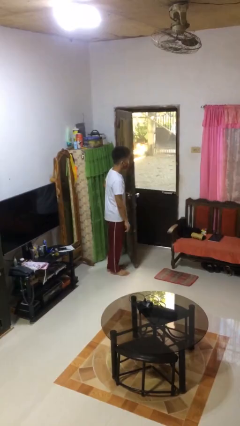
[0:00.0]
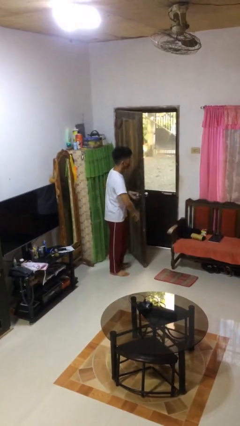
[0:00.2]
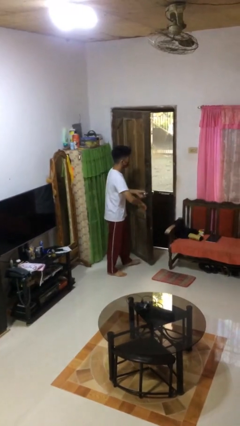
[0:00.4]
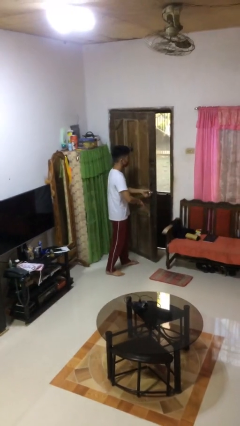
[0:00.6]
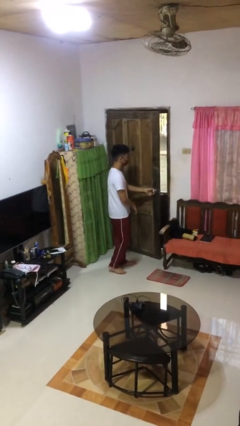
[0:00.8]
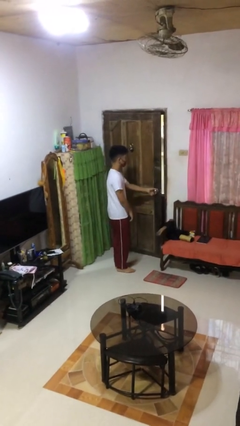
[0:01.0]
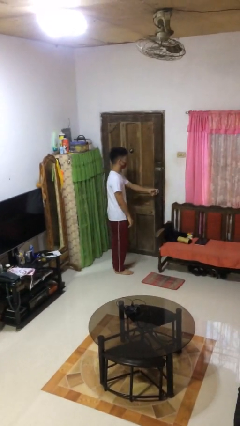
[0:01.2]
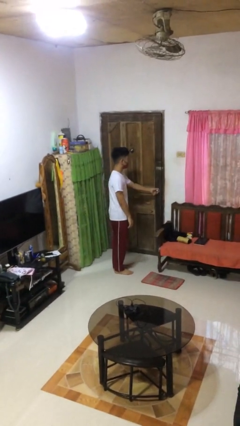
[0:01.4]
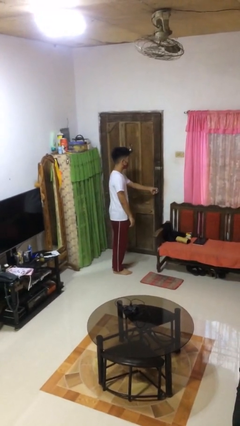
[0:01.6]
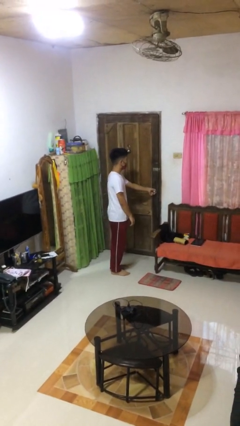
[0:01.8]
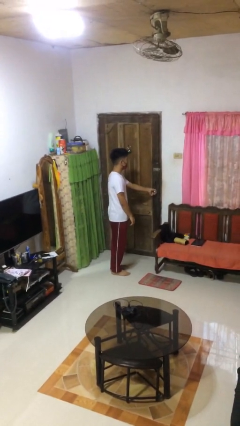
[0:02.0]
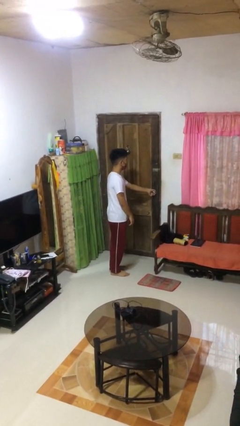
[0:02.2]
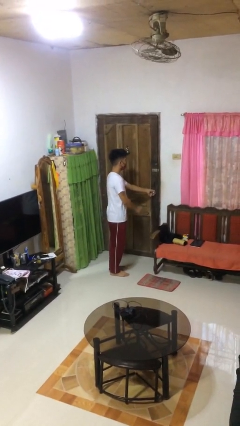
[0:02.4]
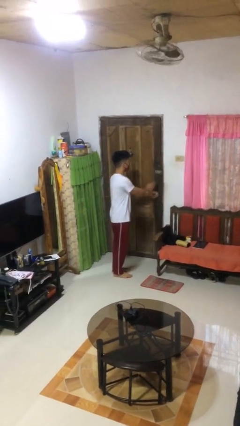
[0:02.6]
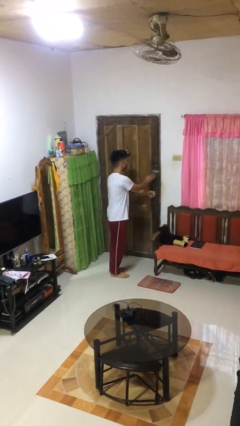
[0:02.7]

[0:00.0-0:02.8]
person closes facility door

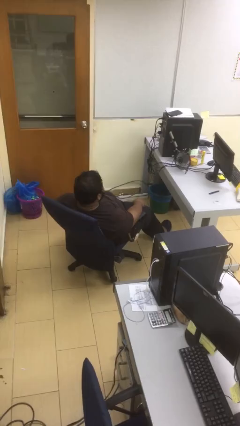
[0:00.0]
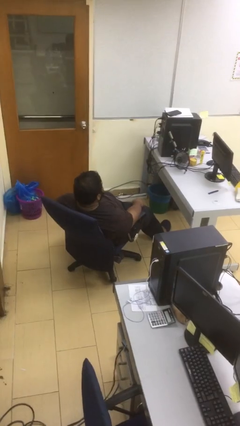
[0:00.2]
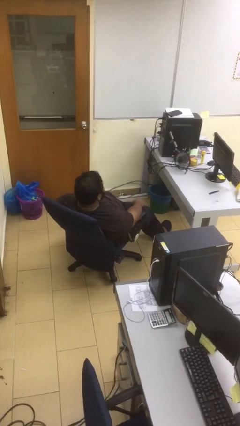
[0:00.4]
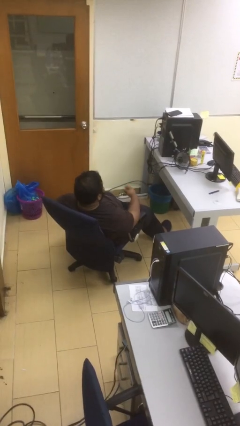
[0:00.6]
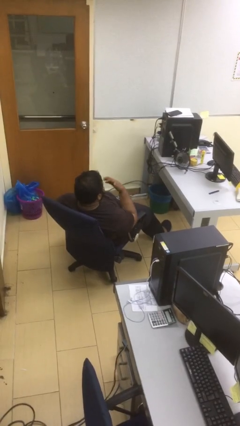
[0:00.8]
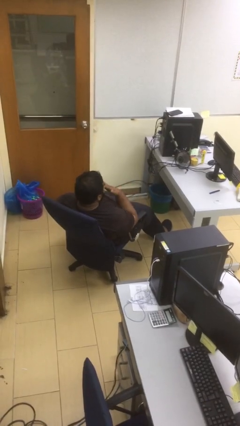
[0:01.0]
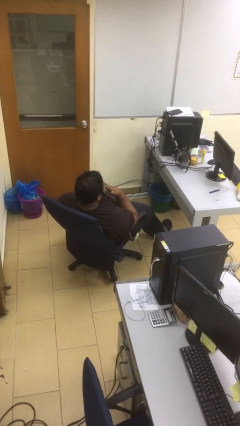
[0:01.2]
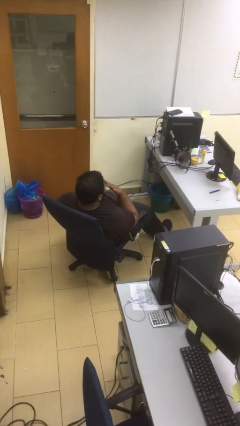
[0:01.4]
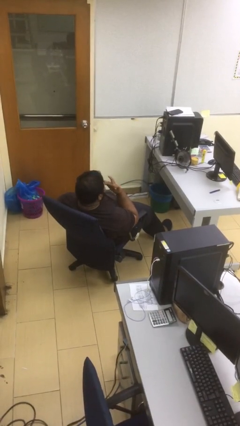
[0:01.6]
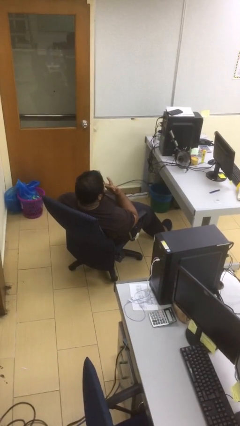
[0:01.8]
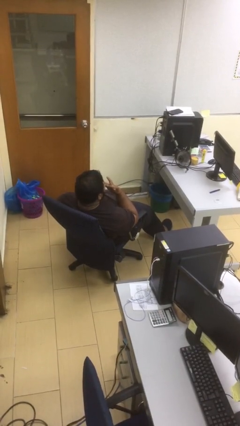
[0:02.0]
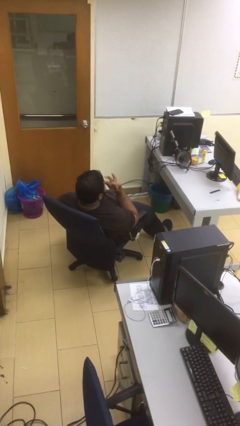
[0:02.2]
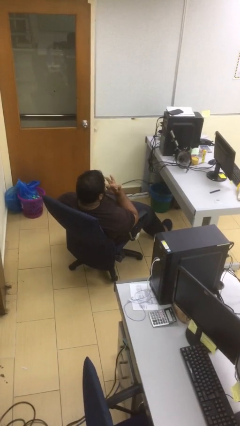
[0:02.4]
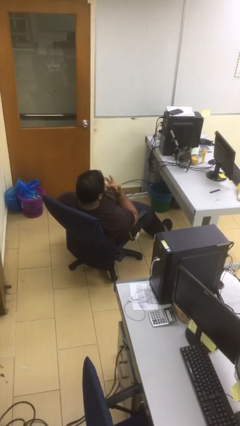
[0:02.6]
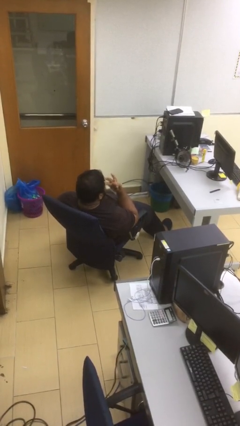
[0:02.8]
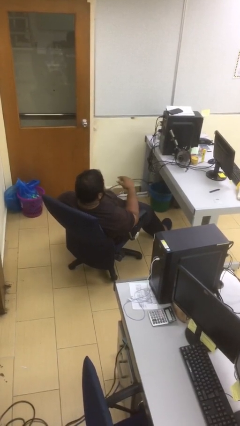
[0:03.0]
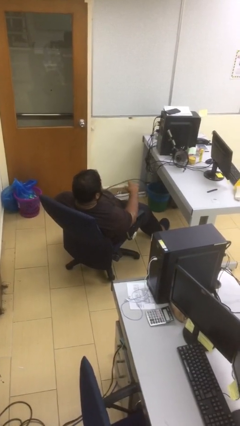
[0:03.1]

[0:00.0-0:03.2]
person licks fingers

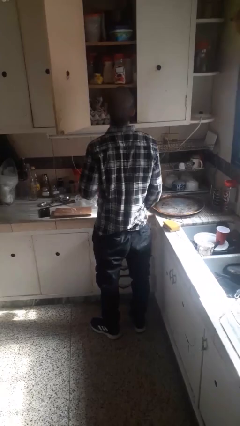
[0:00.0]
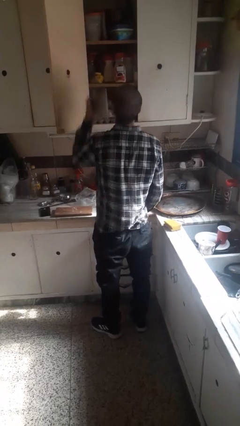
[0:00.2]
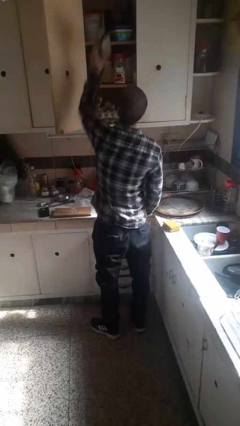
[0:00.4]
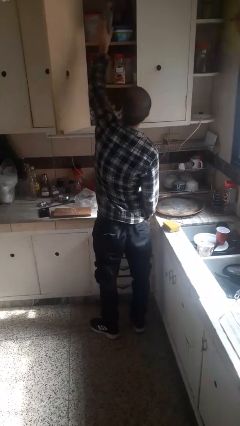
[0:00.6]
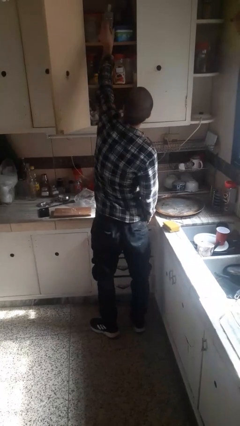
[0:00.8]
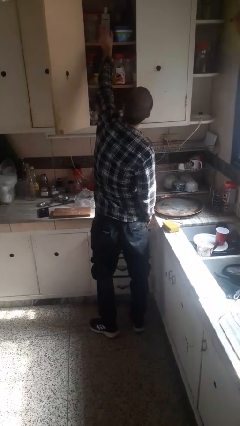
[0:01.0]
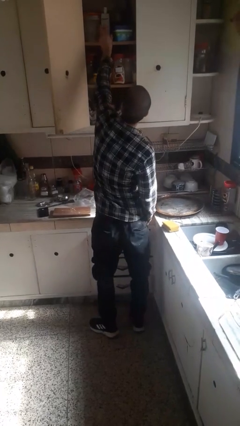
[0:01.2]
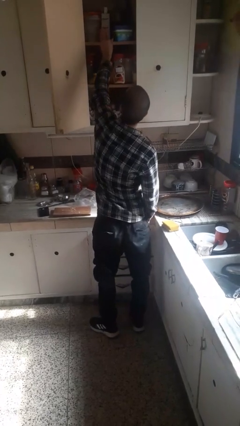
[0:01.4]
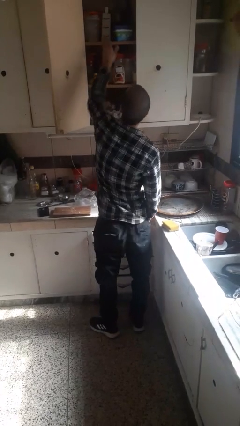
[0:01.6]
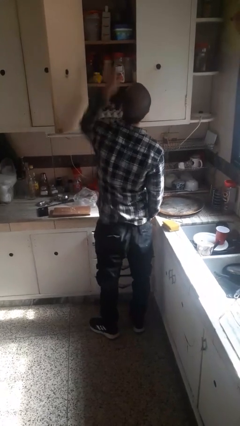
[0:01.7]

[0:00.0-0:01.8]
person picks up object from cabinet

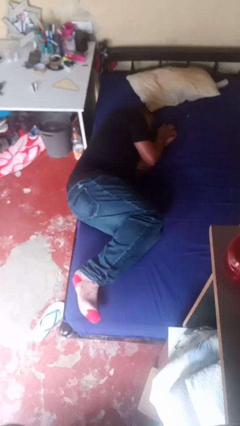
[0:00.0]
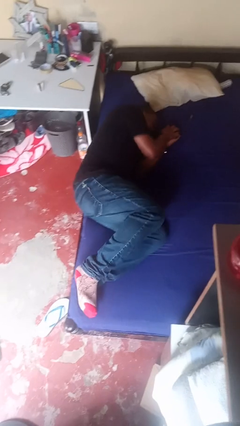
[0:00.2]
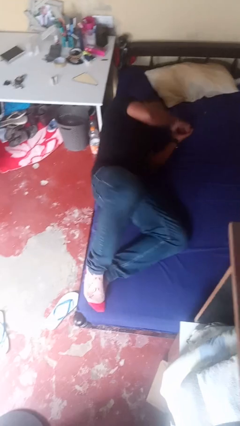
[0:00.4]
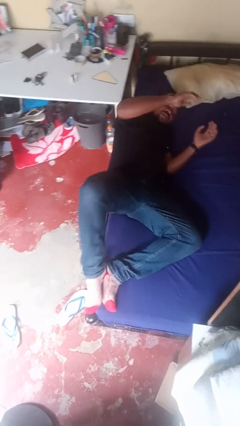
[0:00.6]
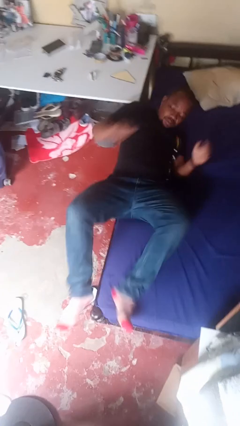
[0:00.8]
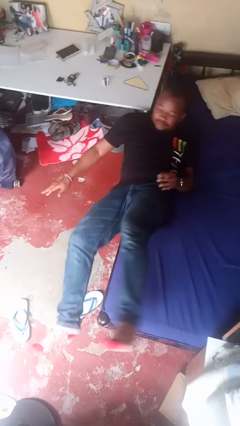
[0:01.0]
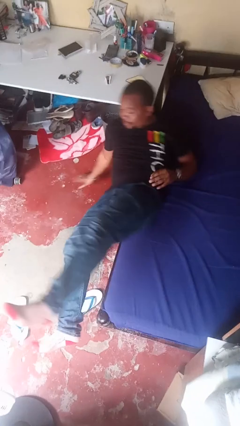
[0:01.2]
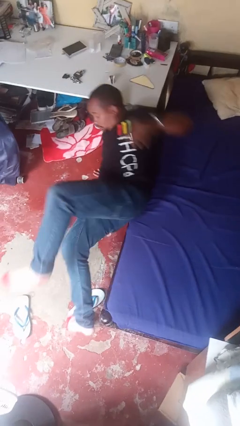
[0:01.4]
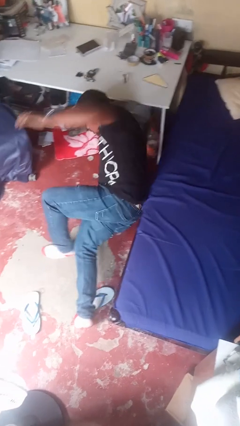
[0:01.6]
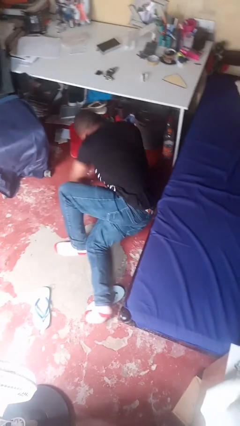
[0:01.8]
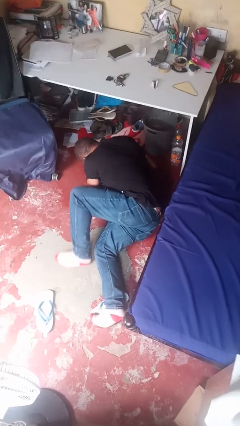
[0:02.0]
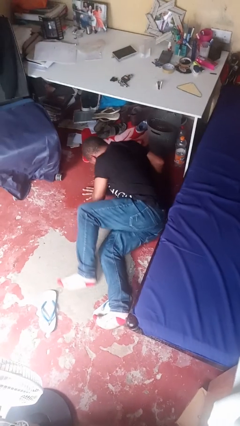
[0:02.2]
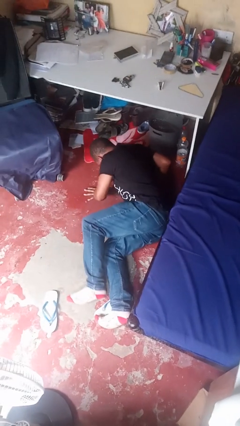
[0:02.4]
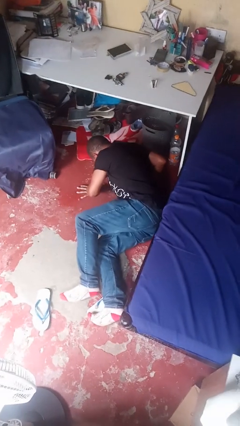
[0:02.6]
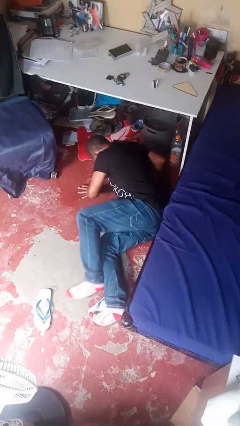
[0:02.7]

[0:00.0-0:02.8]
person falls from bed

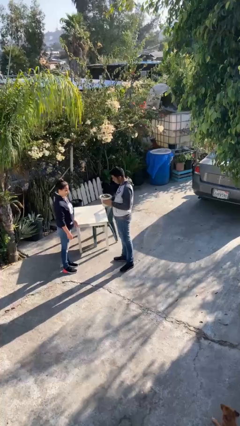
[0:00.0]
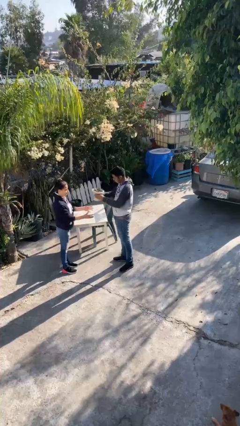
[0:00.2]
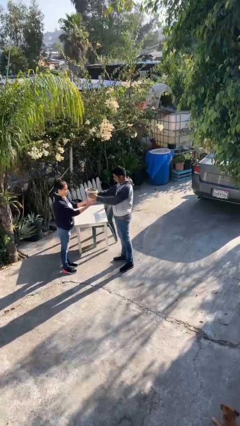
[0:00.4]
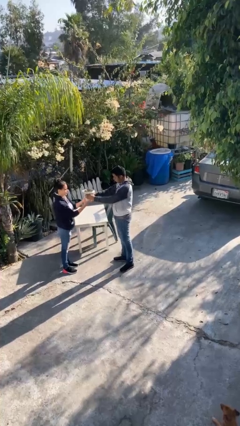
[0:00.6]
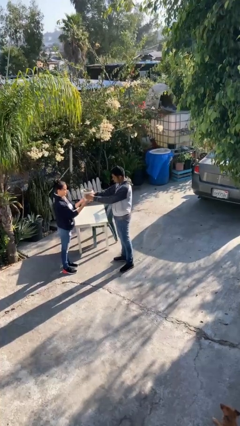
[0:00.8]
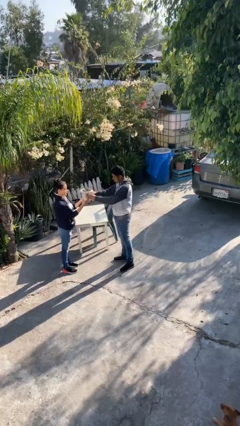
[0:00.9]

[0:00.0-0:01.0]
person transfers object to person

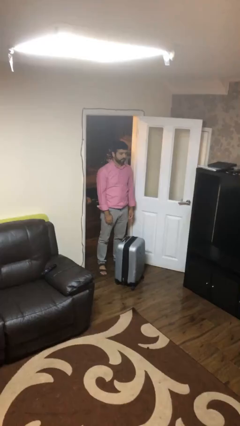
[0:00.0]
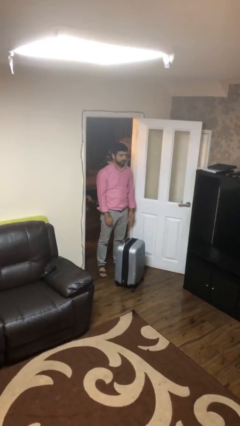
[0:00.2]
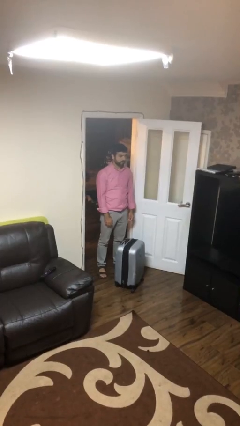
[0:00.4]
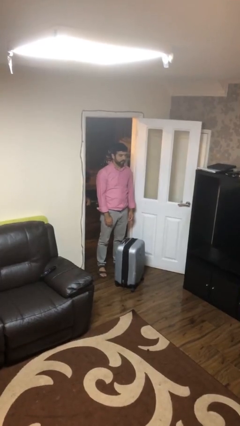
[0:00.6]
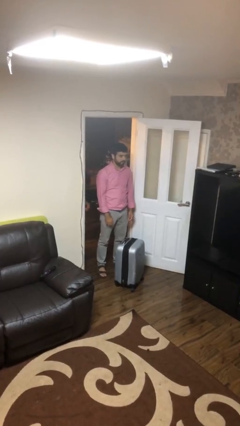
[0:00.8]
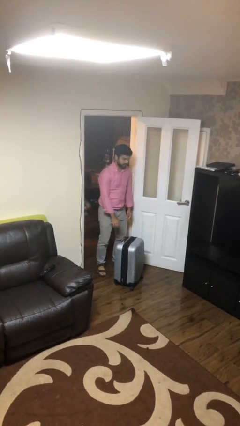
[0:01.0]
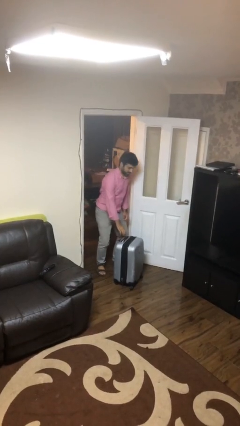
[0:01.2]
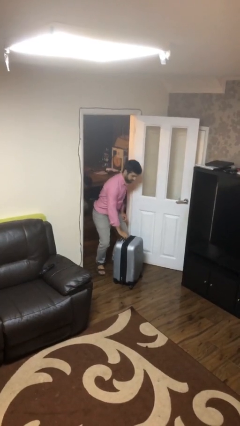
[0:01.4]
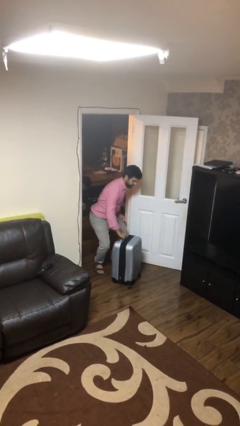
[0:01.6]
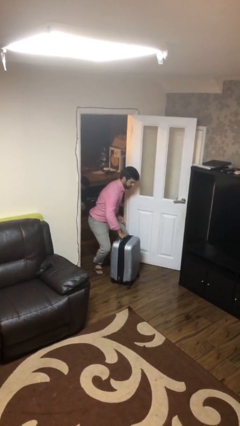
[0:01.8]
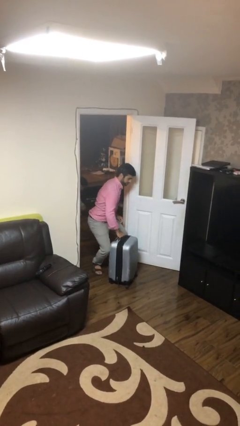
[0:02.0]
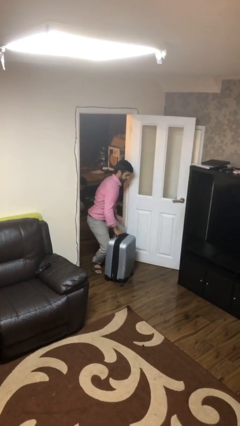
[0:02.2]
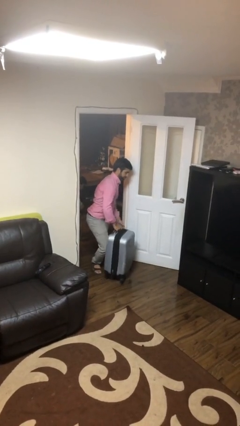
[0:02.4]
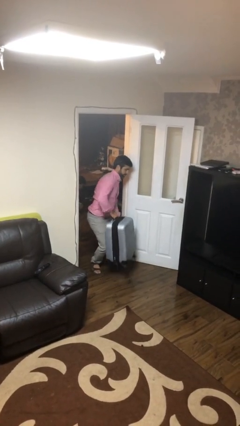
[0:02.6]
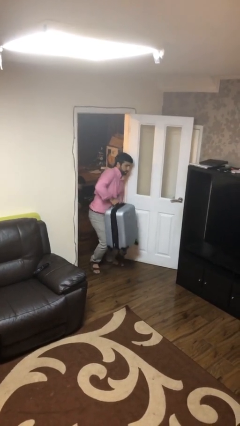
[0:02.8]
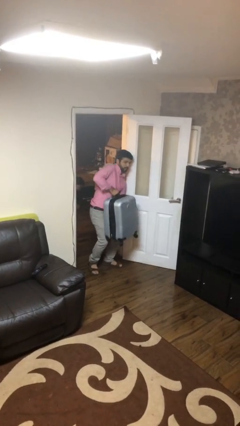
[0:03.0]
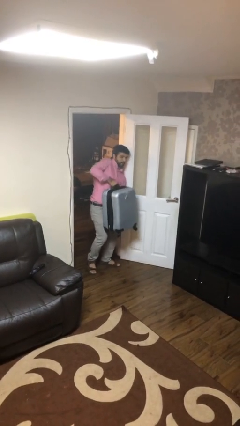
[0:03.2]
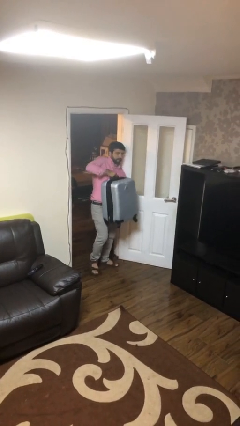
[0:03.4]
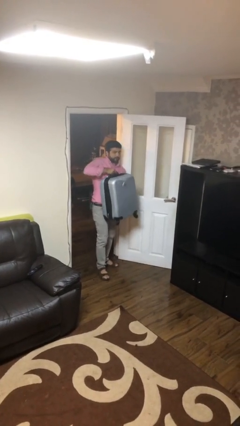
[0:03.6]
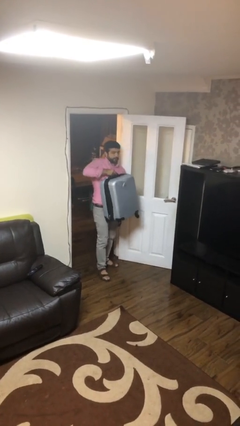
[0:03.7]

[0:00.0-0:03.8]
person picks up object from floor

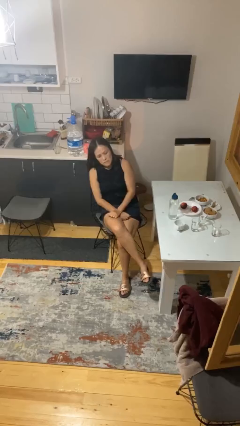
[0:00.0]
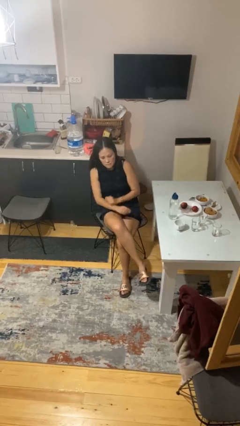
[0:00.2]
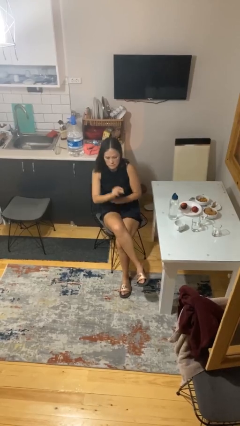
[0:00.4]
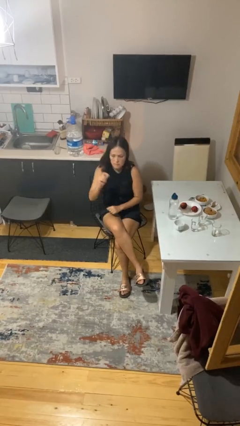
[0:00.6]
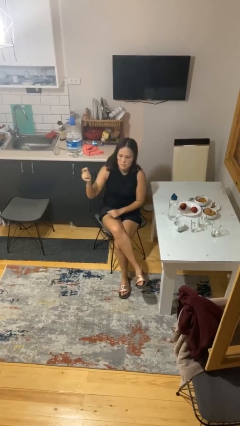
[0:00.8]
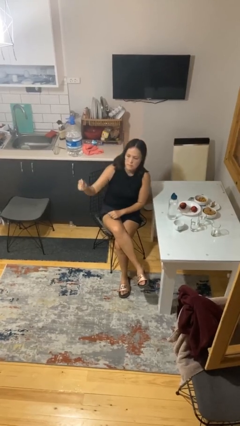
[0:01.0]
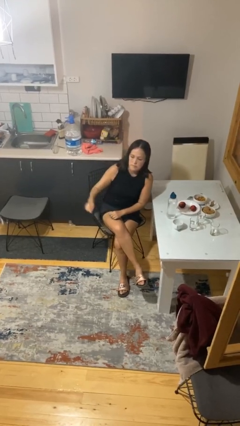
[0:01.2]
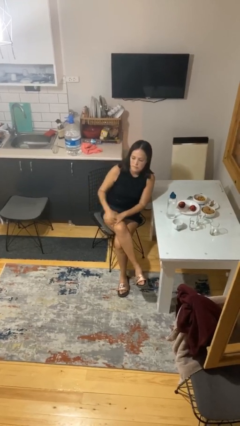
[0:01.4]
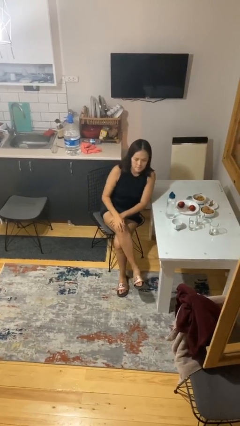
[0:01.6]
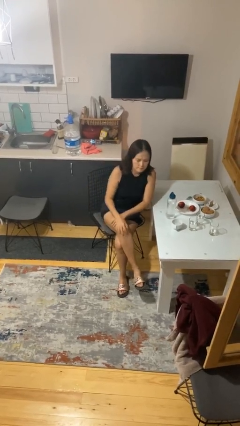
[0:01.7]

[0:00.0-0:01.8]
person snaps fingers
